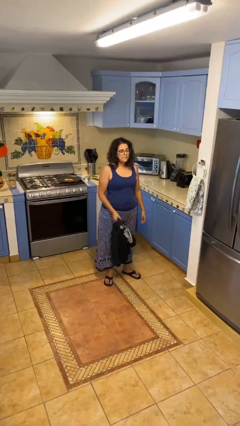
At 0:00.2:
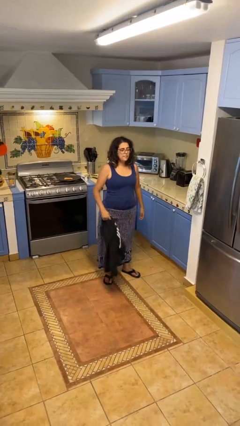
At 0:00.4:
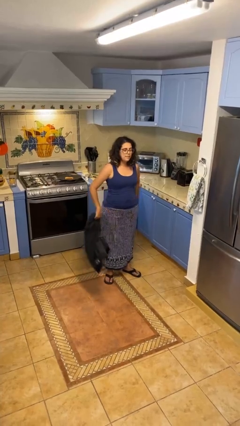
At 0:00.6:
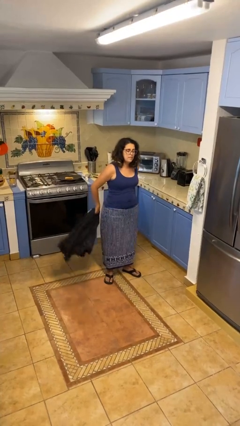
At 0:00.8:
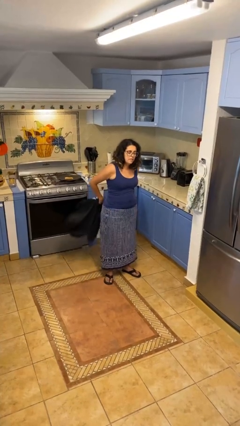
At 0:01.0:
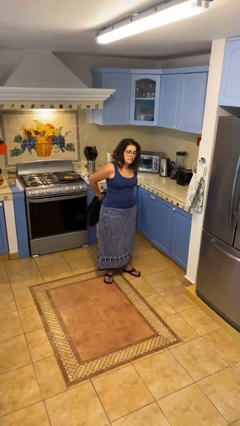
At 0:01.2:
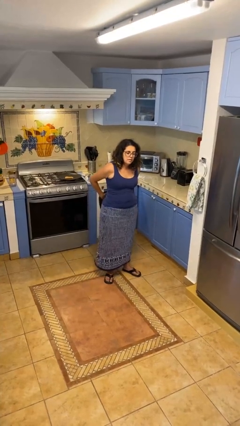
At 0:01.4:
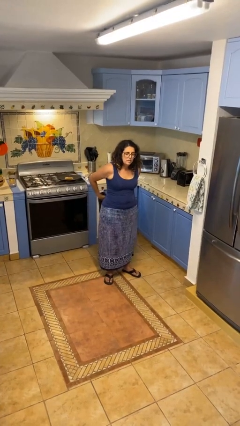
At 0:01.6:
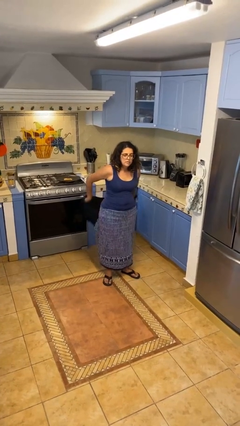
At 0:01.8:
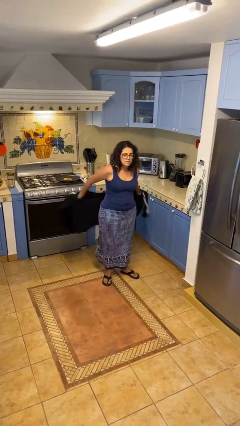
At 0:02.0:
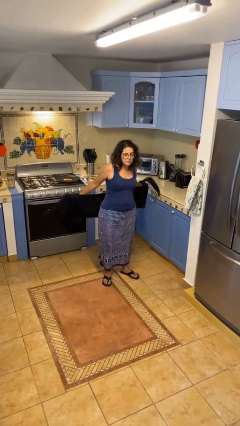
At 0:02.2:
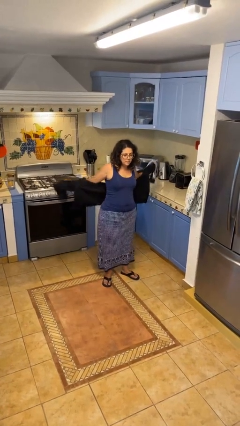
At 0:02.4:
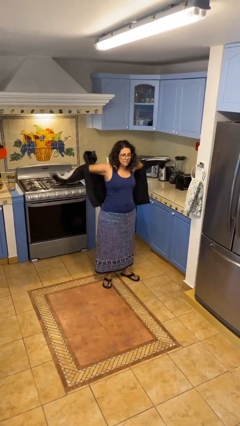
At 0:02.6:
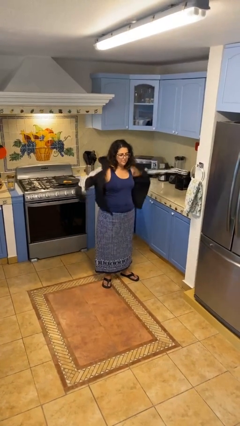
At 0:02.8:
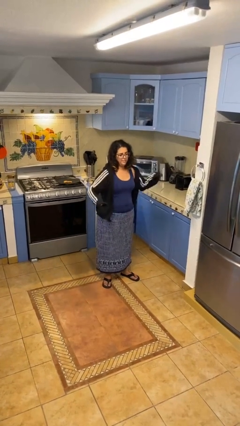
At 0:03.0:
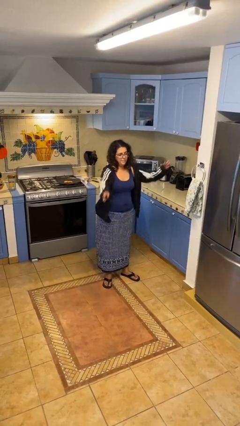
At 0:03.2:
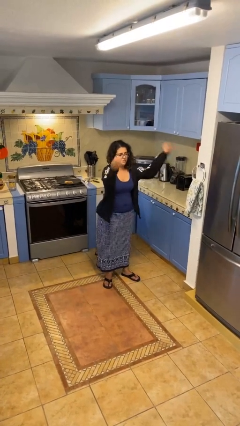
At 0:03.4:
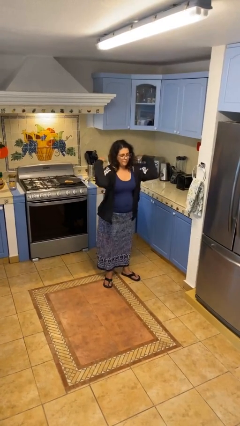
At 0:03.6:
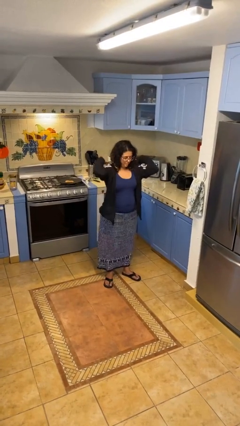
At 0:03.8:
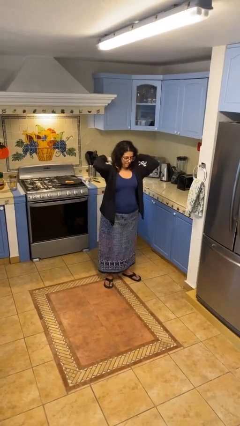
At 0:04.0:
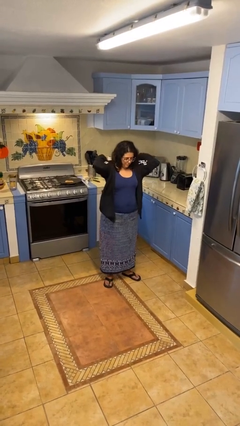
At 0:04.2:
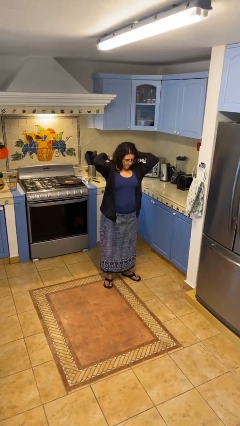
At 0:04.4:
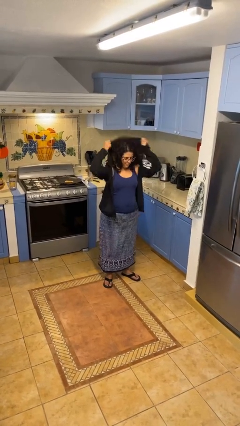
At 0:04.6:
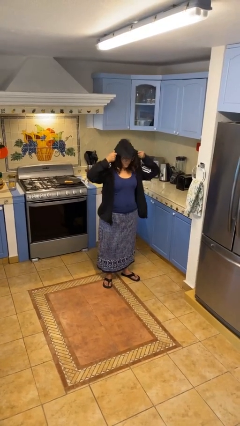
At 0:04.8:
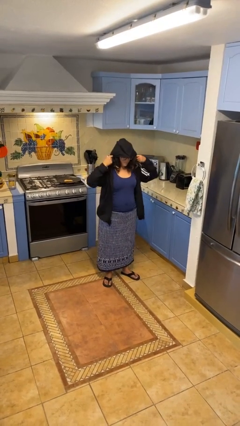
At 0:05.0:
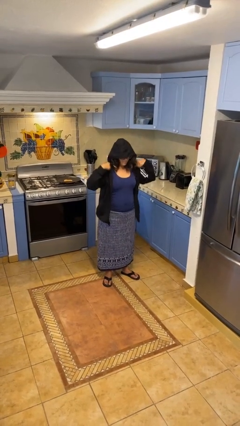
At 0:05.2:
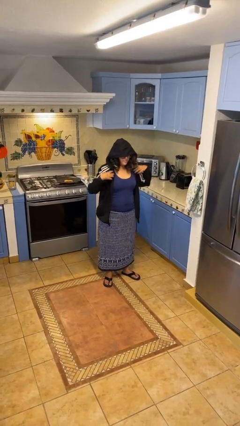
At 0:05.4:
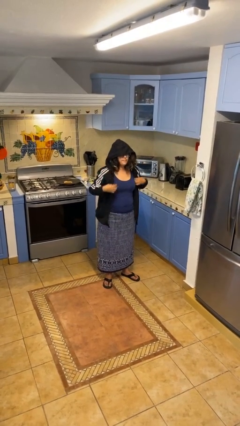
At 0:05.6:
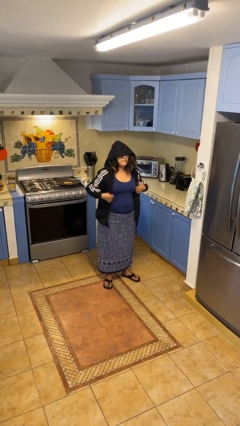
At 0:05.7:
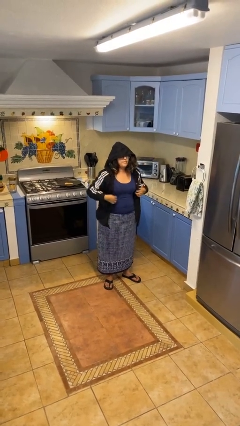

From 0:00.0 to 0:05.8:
person puts on hoodie

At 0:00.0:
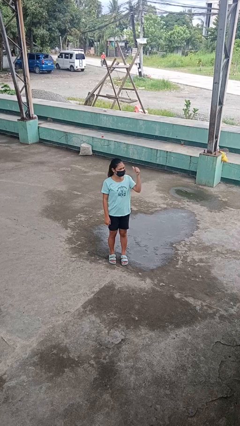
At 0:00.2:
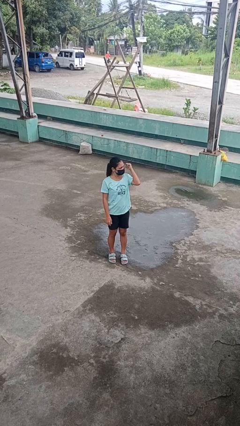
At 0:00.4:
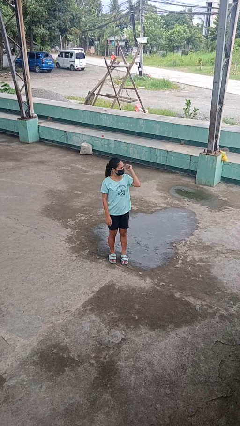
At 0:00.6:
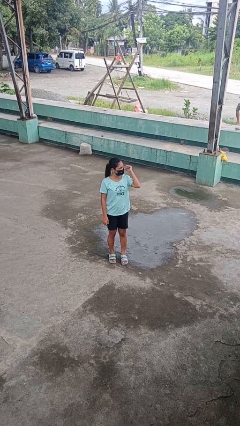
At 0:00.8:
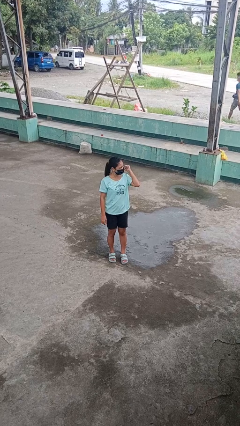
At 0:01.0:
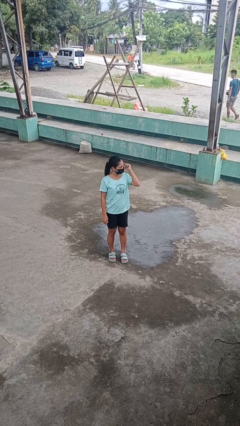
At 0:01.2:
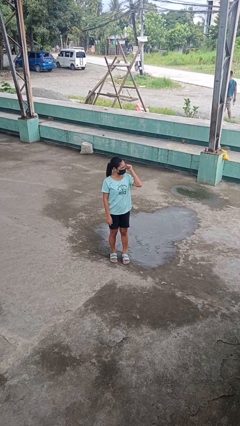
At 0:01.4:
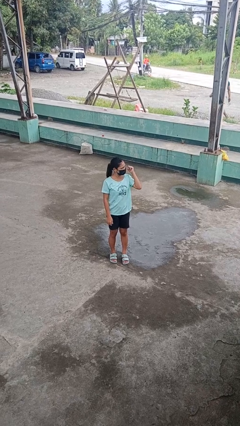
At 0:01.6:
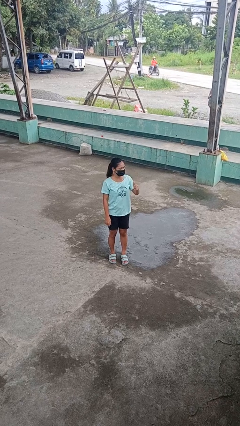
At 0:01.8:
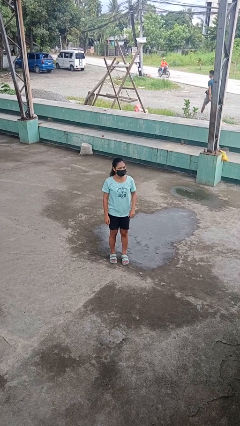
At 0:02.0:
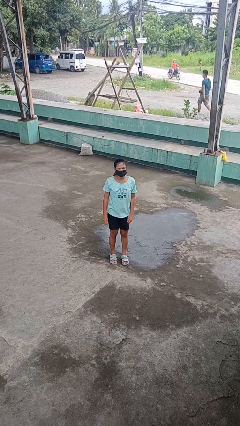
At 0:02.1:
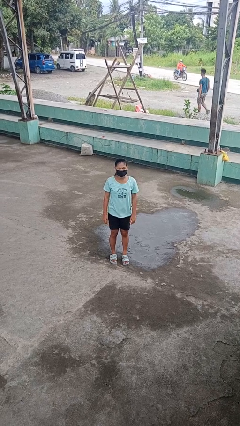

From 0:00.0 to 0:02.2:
person gestures behind me

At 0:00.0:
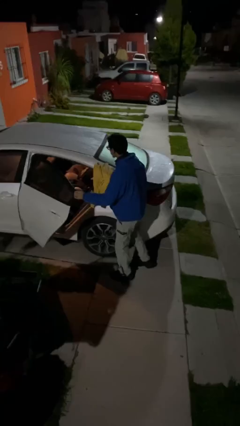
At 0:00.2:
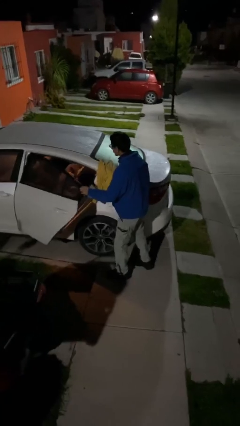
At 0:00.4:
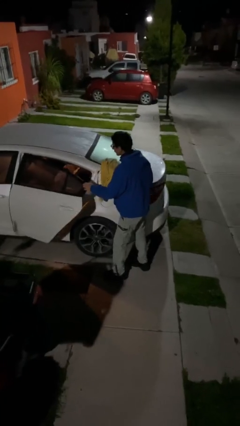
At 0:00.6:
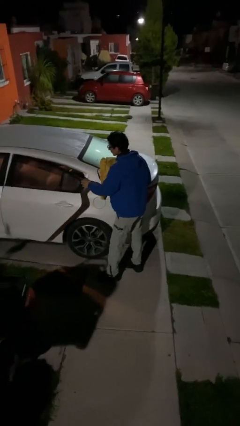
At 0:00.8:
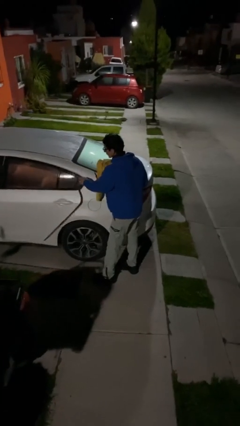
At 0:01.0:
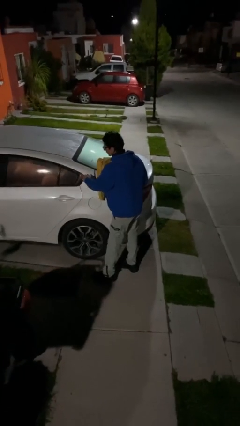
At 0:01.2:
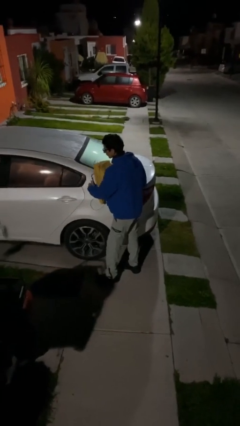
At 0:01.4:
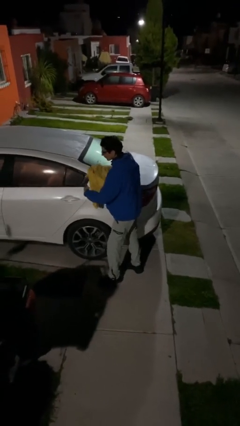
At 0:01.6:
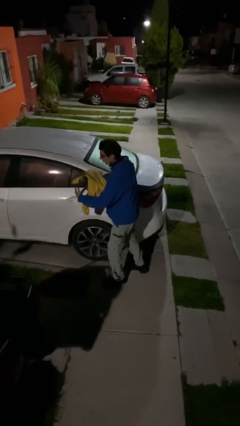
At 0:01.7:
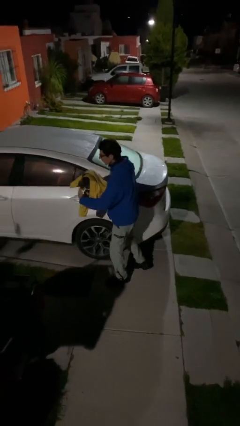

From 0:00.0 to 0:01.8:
person closes car door

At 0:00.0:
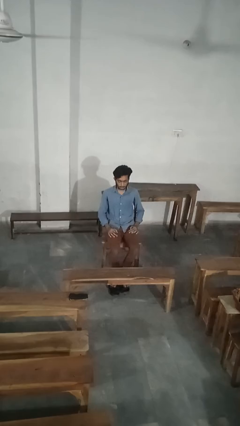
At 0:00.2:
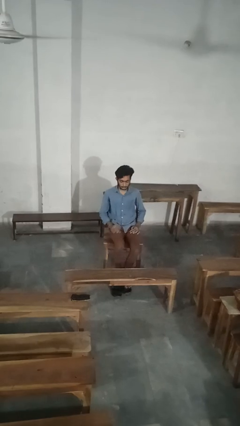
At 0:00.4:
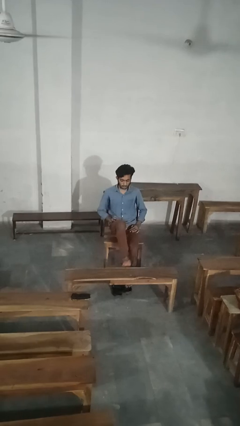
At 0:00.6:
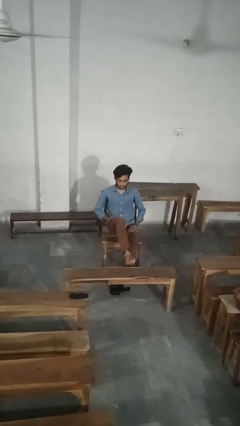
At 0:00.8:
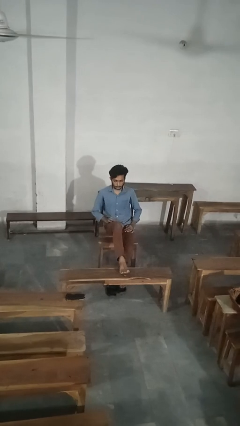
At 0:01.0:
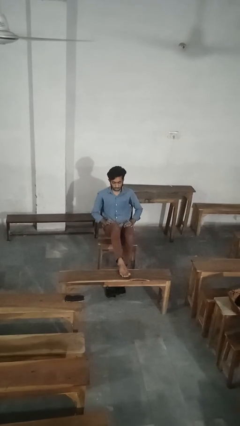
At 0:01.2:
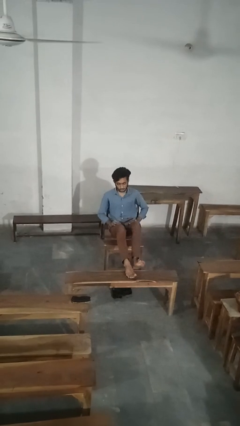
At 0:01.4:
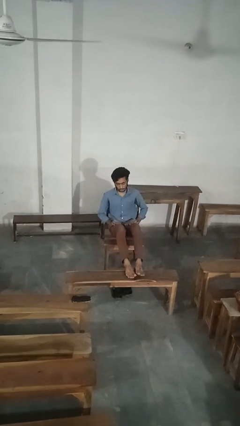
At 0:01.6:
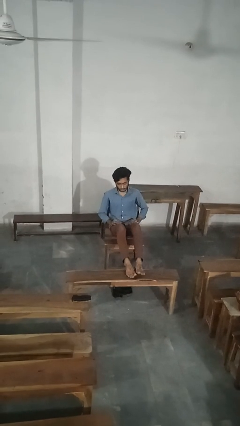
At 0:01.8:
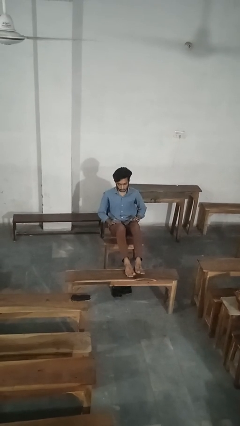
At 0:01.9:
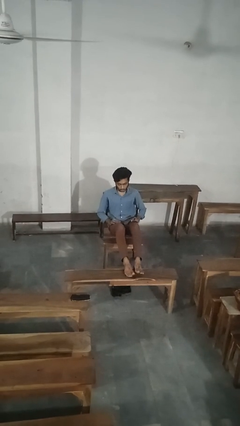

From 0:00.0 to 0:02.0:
person puts feet up

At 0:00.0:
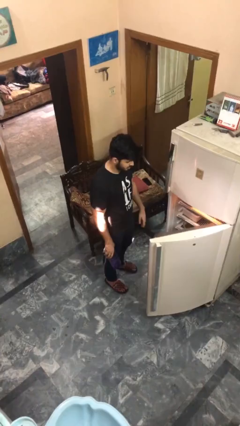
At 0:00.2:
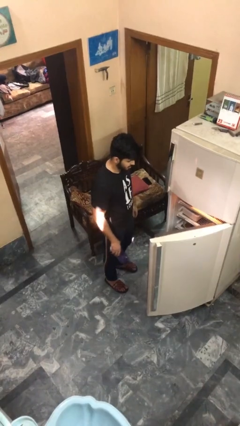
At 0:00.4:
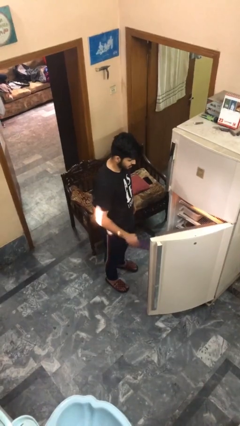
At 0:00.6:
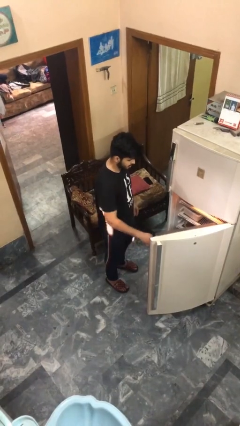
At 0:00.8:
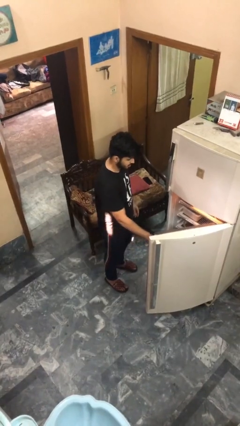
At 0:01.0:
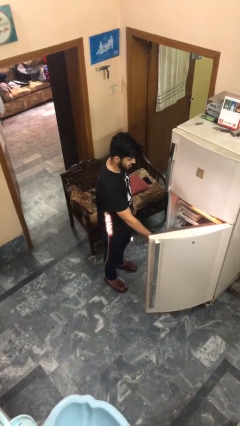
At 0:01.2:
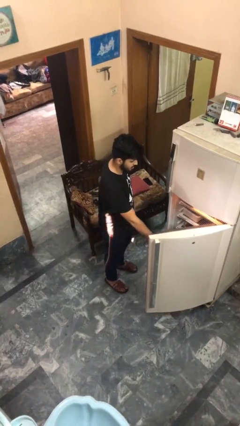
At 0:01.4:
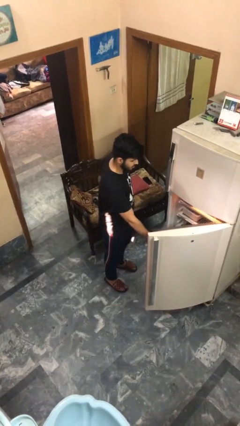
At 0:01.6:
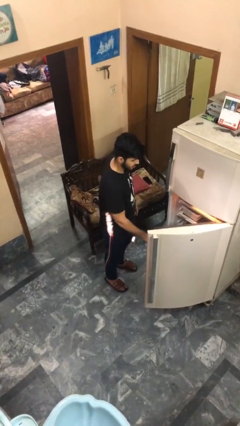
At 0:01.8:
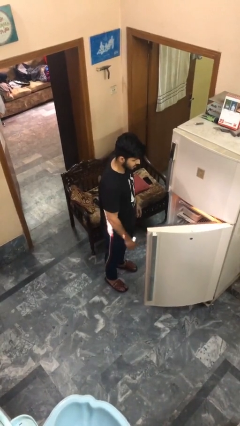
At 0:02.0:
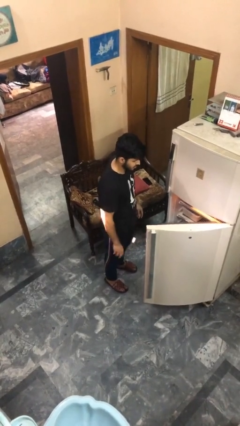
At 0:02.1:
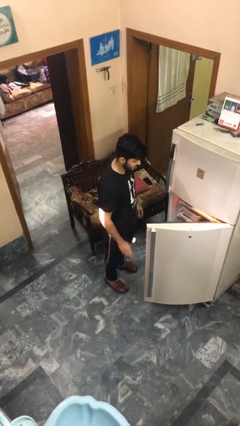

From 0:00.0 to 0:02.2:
person puts object into refrigerator

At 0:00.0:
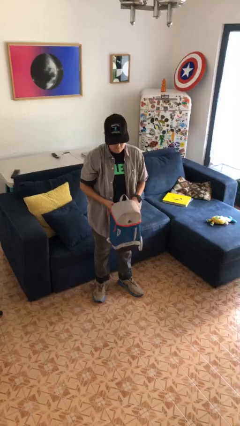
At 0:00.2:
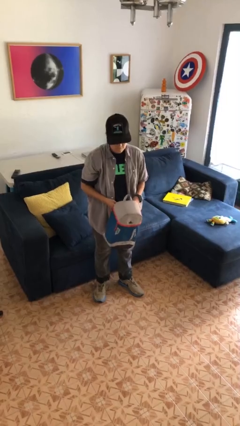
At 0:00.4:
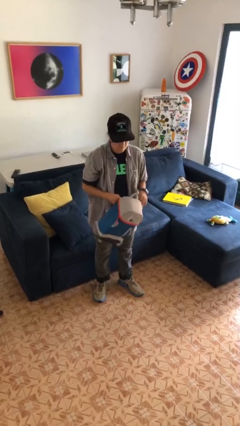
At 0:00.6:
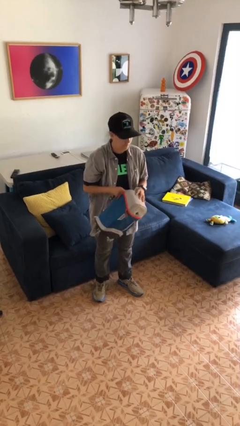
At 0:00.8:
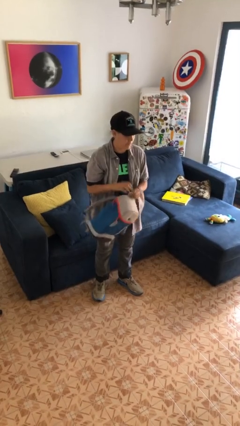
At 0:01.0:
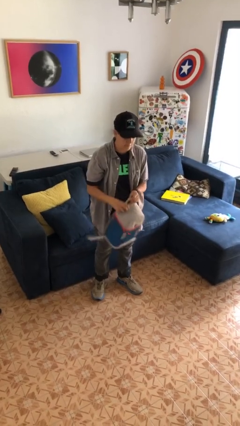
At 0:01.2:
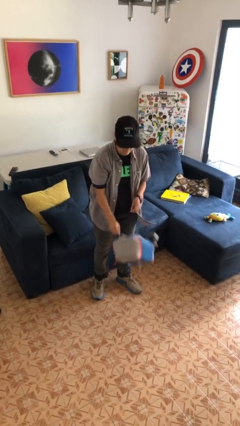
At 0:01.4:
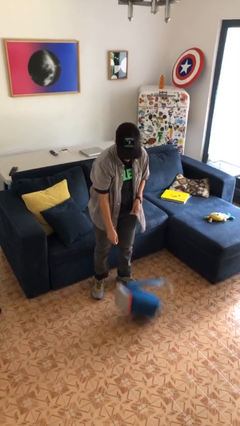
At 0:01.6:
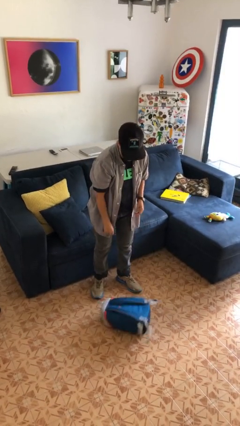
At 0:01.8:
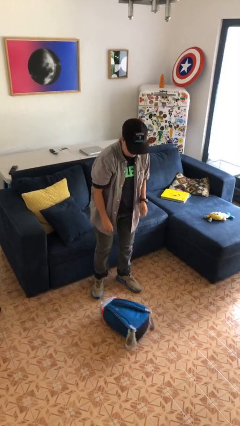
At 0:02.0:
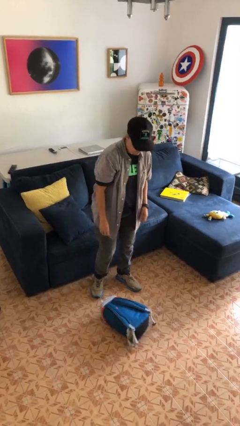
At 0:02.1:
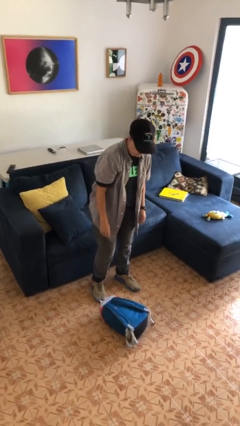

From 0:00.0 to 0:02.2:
person drops object

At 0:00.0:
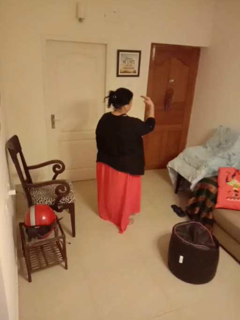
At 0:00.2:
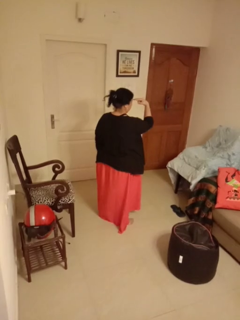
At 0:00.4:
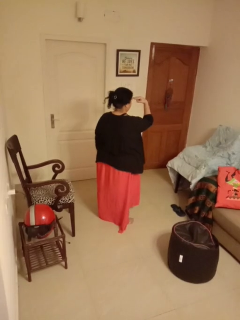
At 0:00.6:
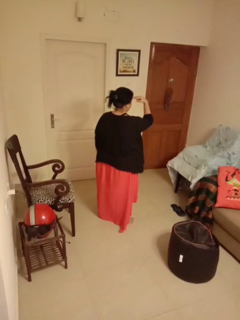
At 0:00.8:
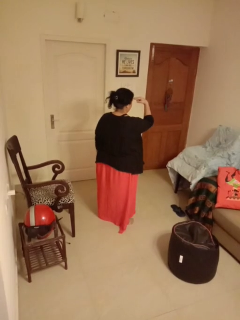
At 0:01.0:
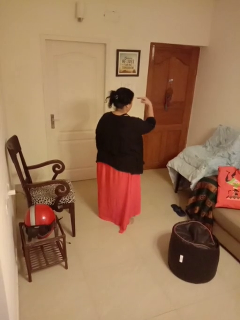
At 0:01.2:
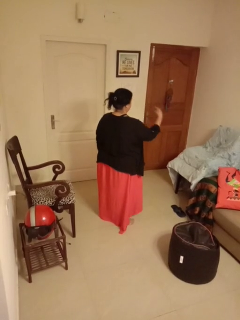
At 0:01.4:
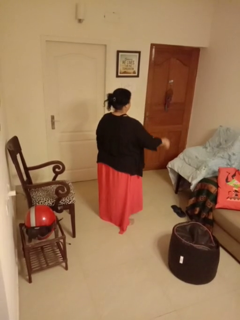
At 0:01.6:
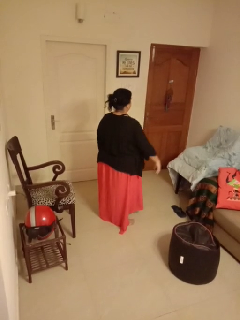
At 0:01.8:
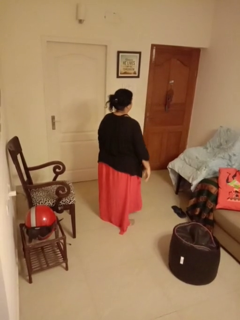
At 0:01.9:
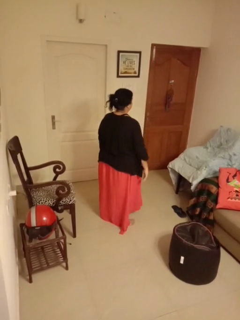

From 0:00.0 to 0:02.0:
person gestures watch closely
